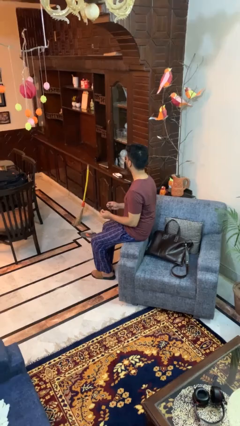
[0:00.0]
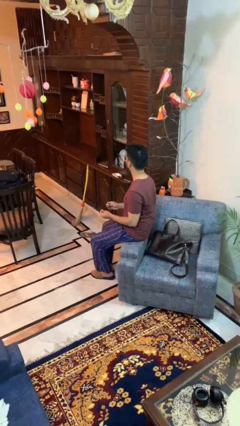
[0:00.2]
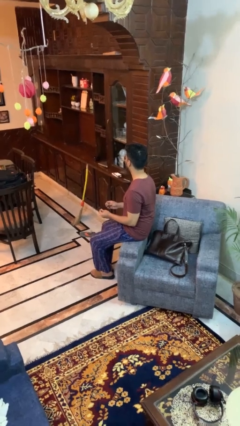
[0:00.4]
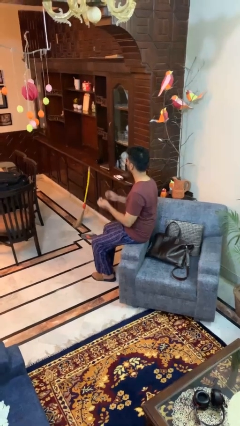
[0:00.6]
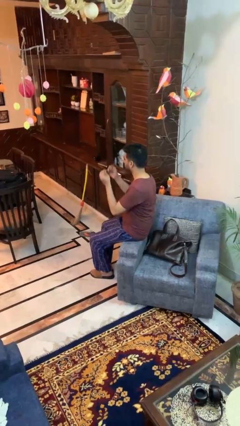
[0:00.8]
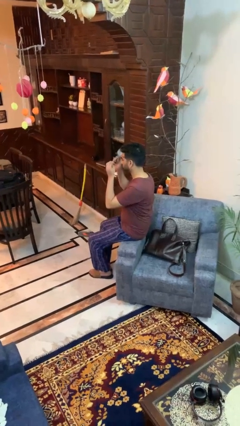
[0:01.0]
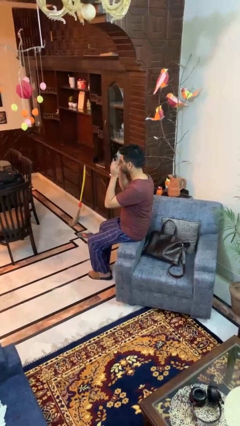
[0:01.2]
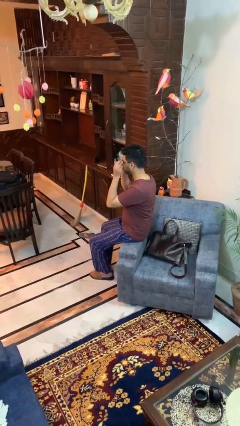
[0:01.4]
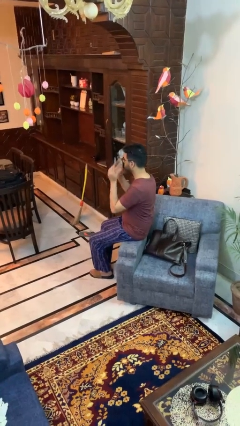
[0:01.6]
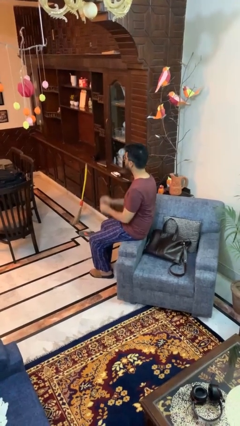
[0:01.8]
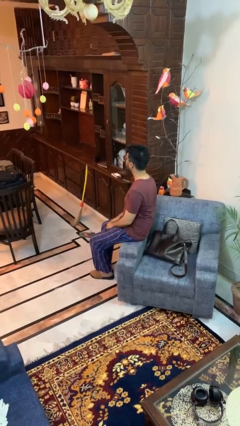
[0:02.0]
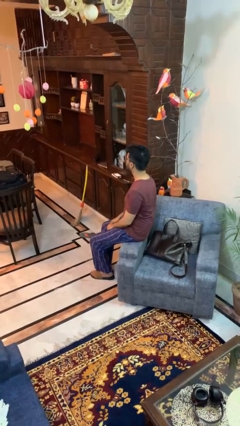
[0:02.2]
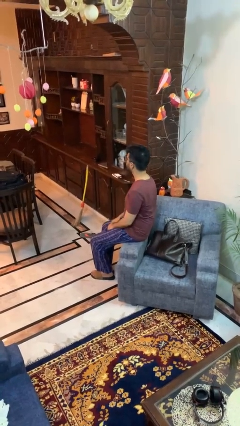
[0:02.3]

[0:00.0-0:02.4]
person puts on glasses

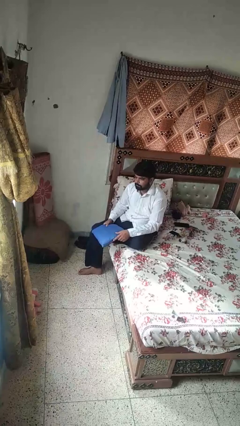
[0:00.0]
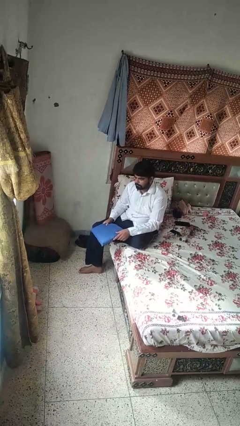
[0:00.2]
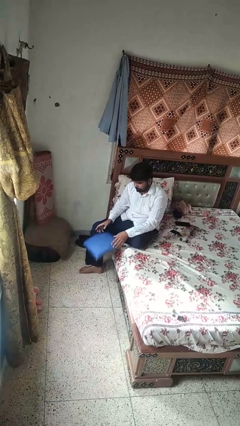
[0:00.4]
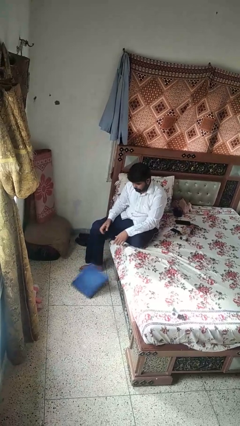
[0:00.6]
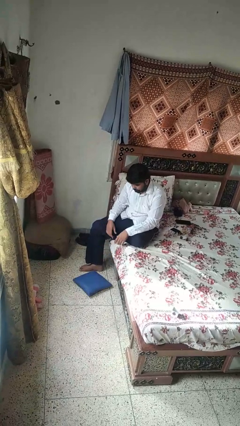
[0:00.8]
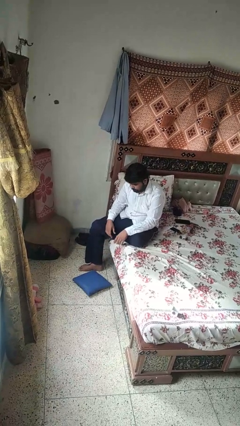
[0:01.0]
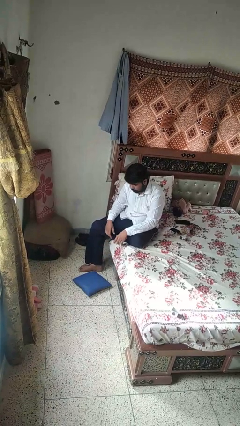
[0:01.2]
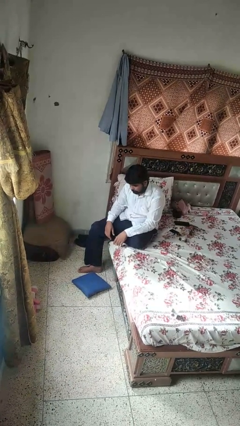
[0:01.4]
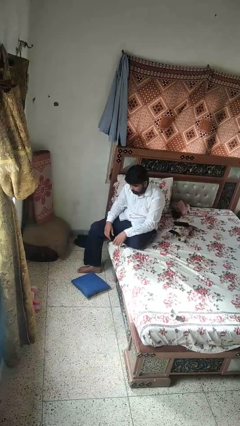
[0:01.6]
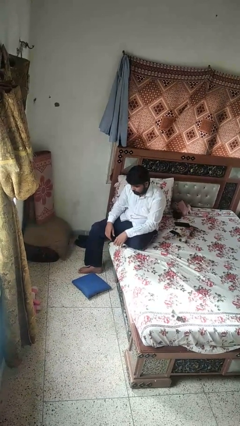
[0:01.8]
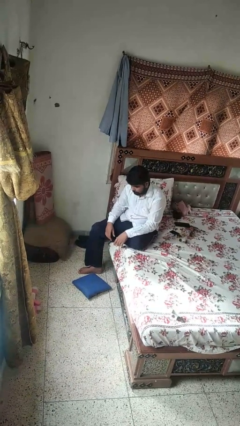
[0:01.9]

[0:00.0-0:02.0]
person drops object

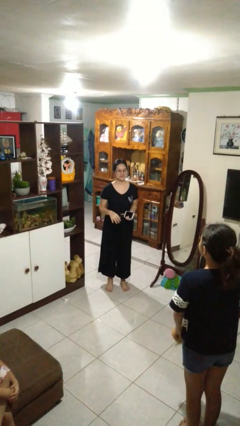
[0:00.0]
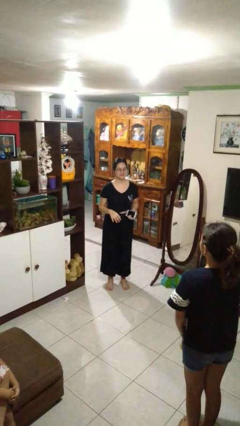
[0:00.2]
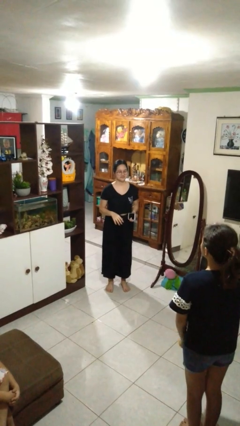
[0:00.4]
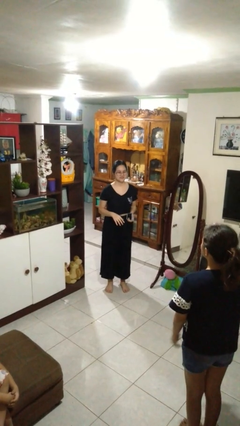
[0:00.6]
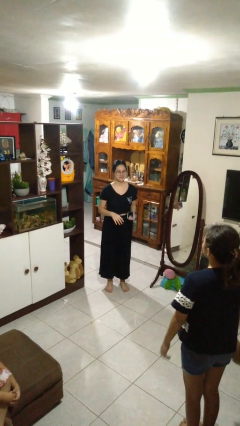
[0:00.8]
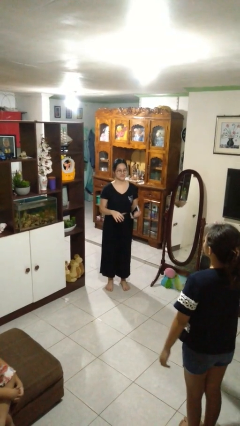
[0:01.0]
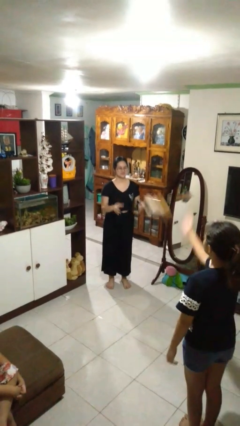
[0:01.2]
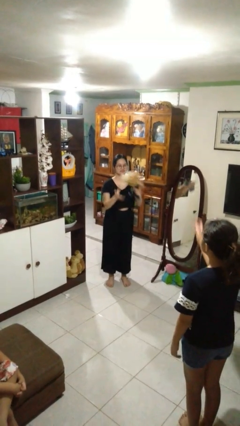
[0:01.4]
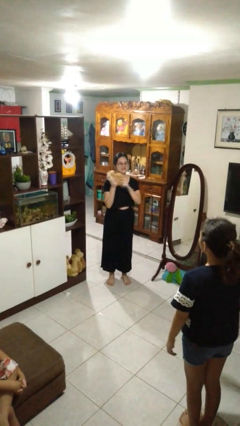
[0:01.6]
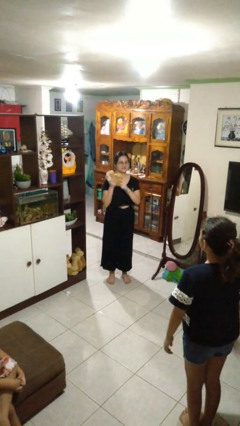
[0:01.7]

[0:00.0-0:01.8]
person catches object from person

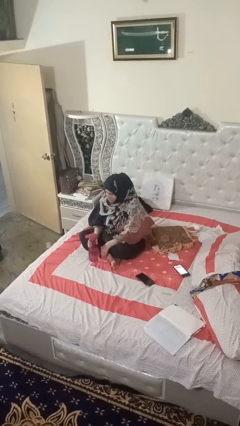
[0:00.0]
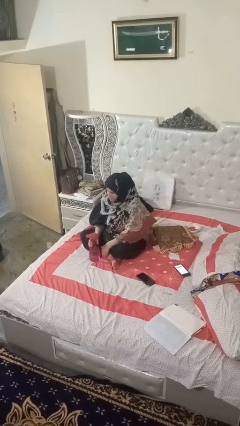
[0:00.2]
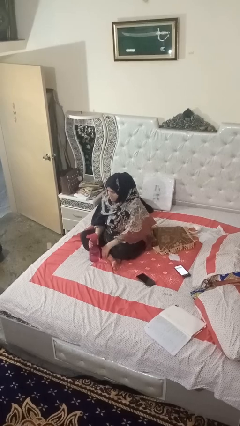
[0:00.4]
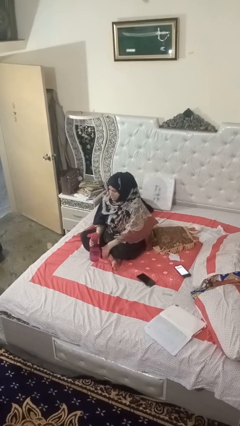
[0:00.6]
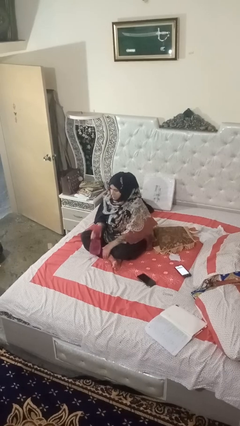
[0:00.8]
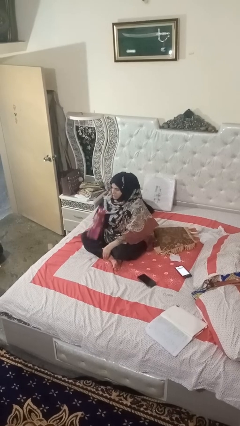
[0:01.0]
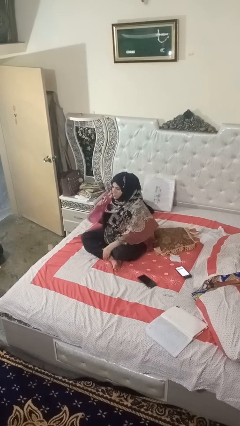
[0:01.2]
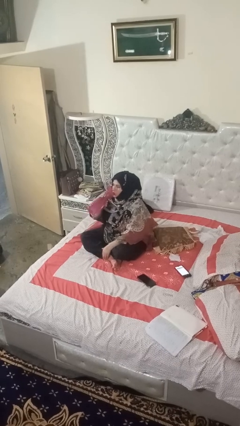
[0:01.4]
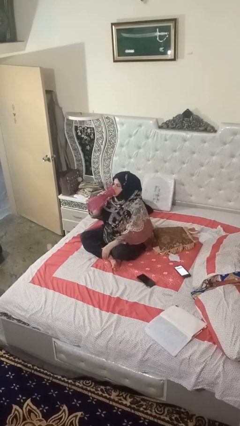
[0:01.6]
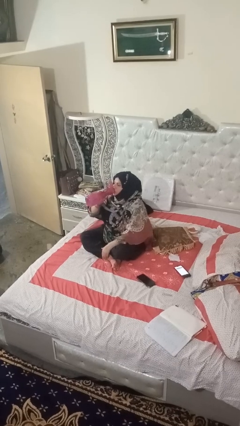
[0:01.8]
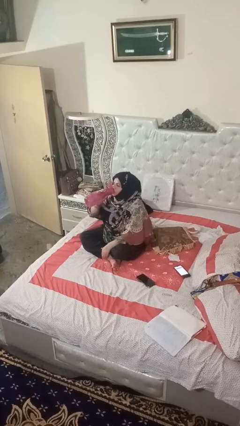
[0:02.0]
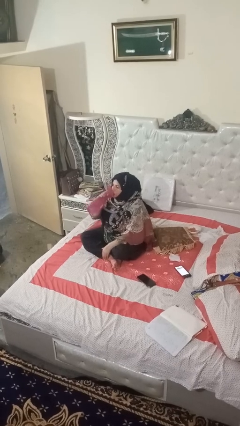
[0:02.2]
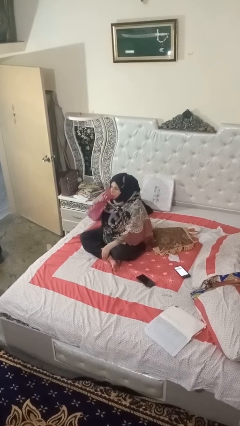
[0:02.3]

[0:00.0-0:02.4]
person drinks from bottle

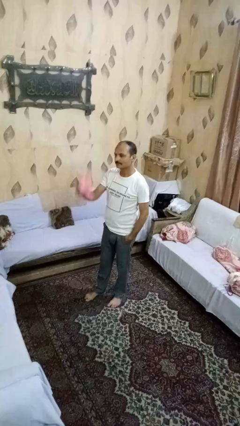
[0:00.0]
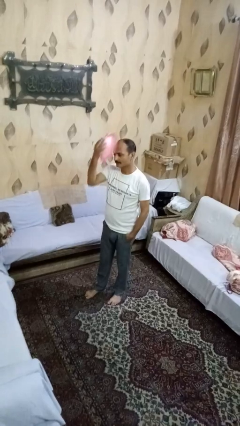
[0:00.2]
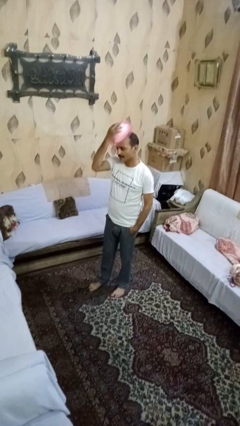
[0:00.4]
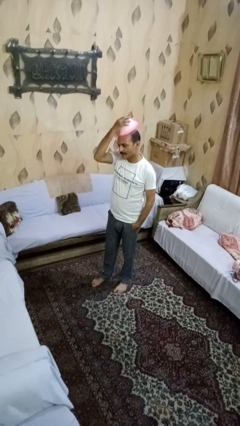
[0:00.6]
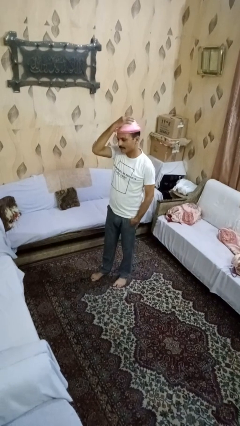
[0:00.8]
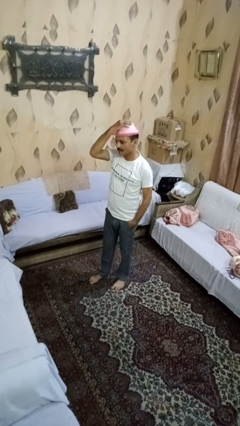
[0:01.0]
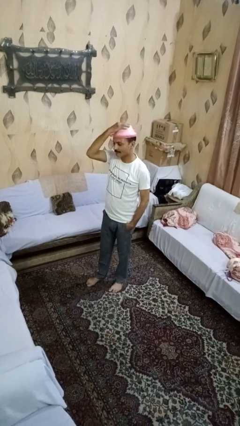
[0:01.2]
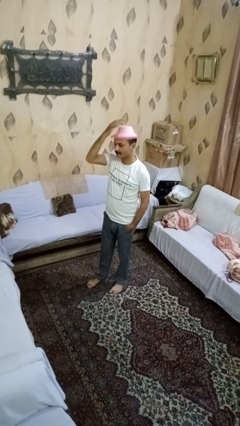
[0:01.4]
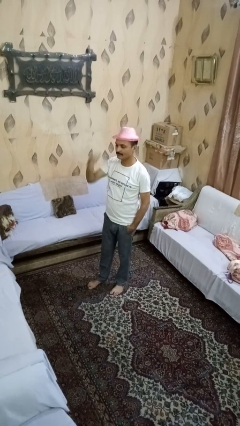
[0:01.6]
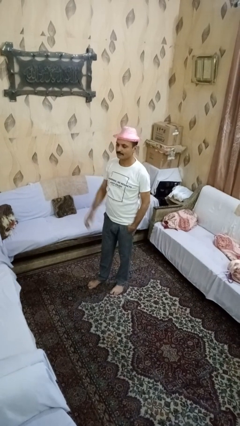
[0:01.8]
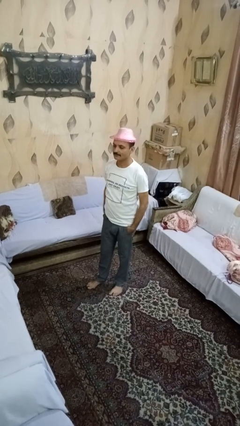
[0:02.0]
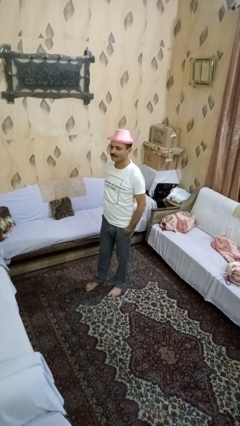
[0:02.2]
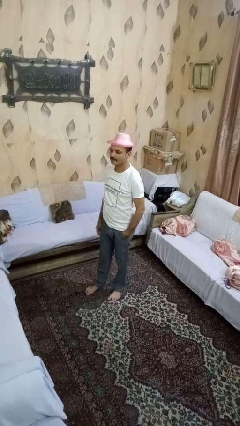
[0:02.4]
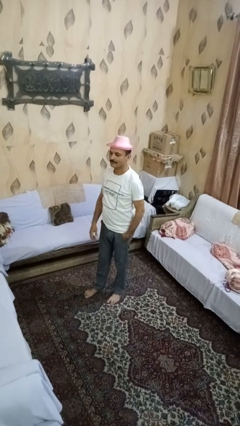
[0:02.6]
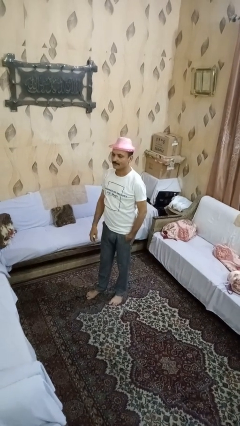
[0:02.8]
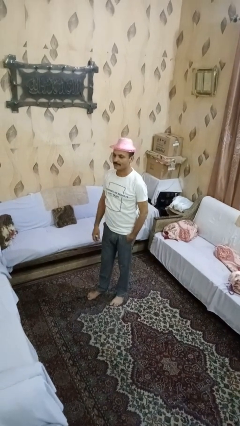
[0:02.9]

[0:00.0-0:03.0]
person puts on hat

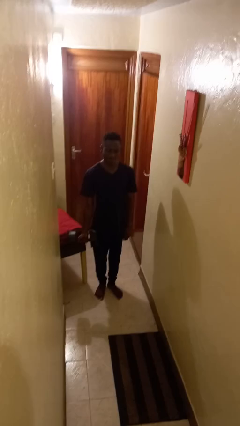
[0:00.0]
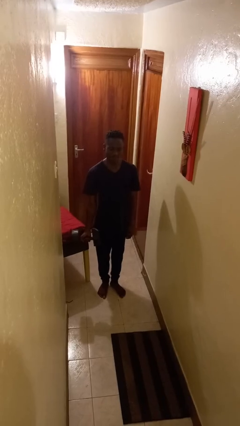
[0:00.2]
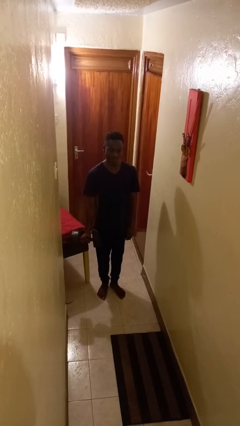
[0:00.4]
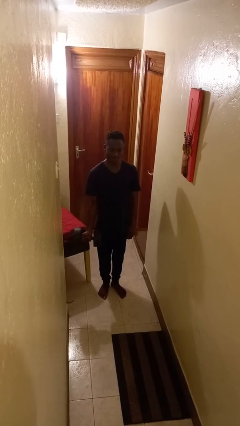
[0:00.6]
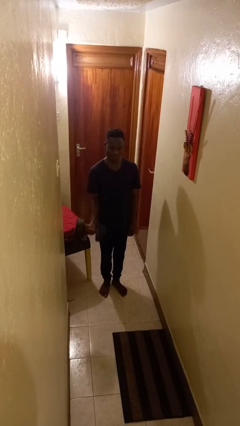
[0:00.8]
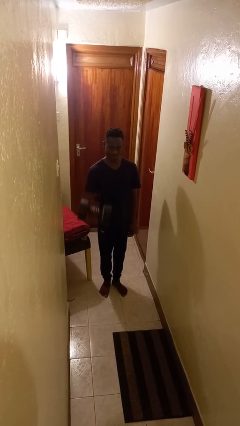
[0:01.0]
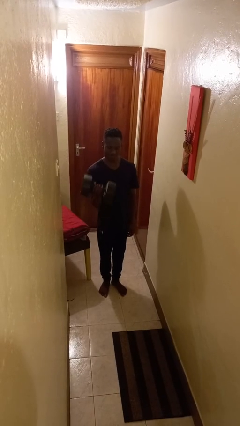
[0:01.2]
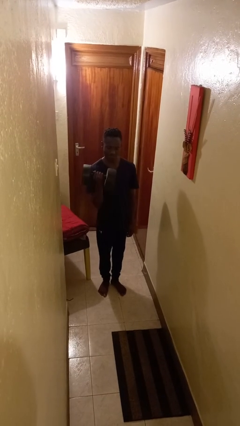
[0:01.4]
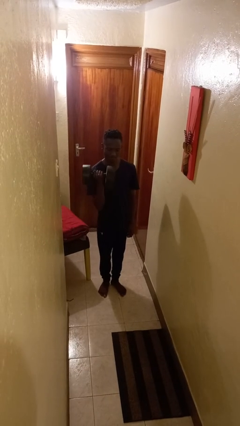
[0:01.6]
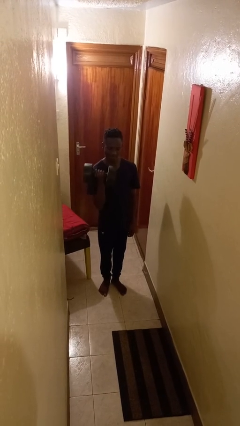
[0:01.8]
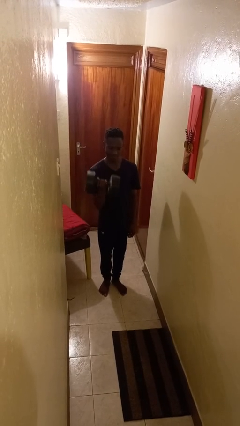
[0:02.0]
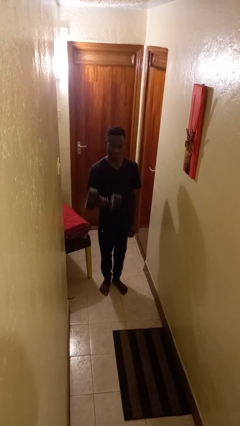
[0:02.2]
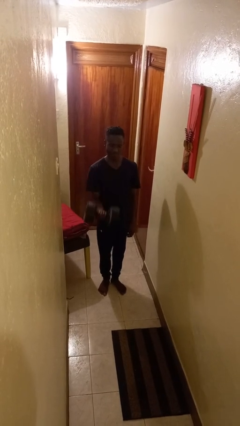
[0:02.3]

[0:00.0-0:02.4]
person lifts dumbbells

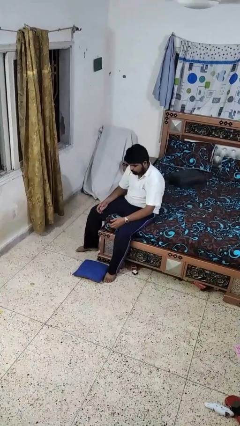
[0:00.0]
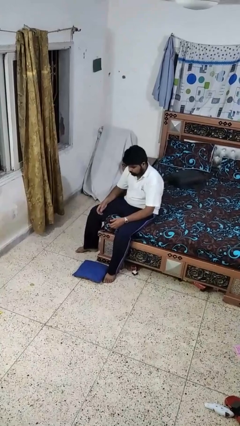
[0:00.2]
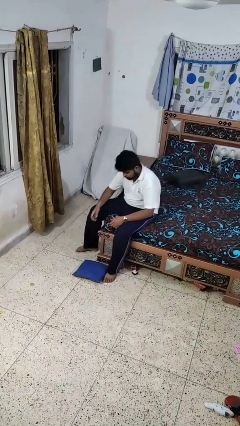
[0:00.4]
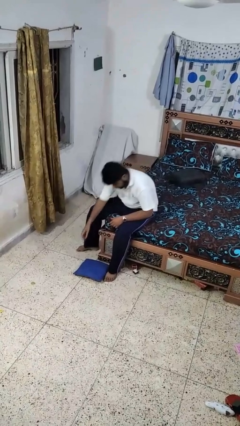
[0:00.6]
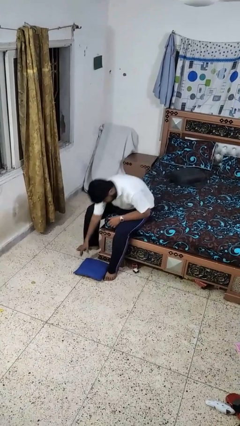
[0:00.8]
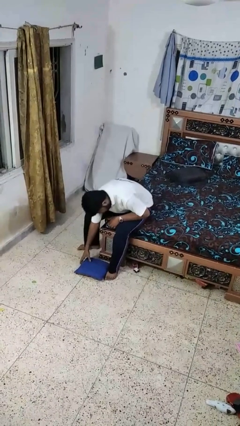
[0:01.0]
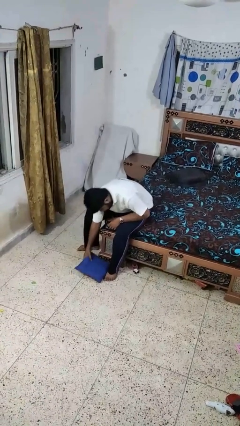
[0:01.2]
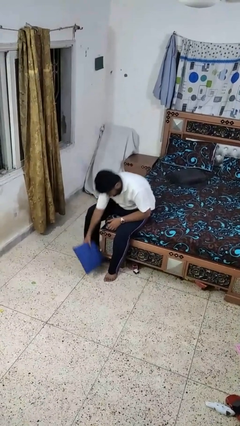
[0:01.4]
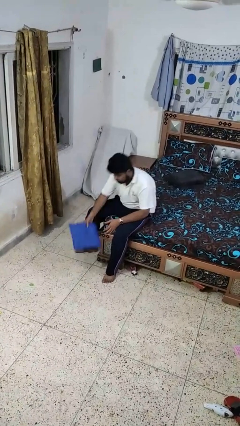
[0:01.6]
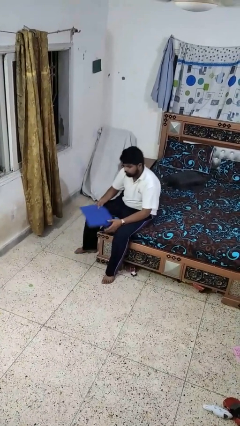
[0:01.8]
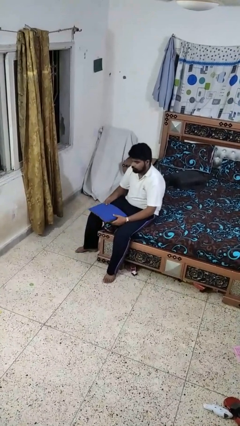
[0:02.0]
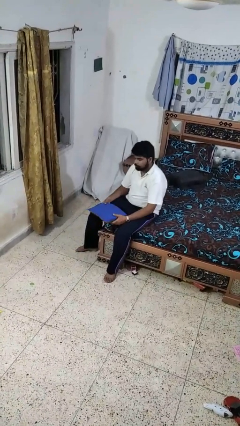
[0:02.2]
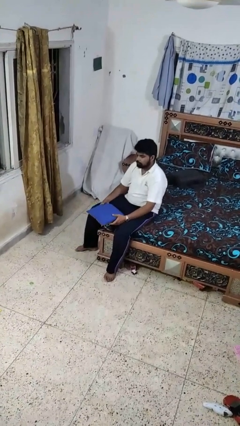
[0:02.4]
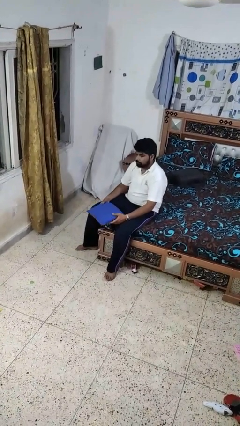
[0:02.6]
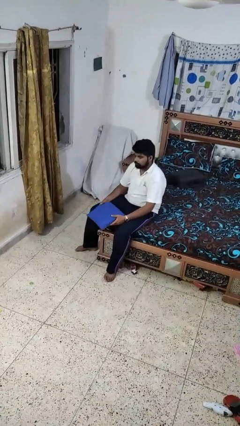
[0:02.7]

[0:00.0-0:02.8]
person picks up object from floor

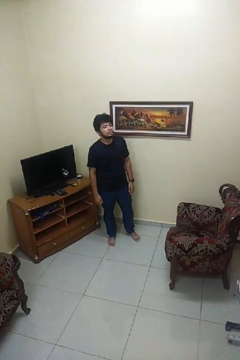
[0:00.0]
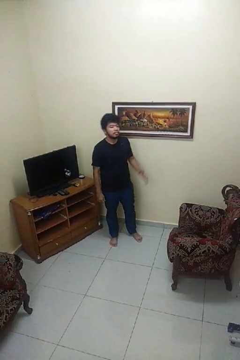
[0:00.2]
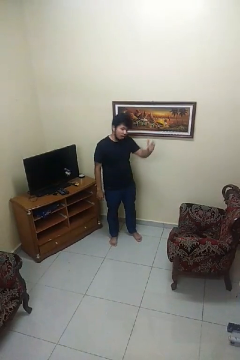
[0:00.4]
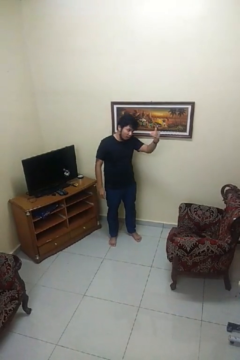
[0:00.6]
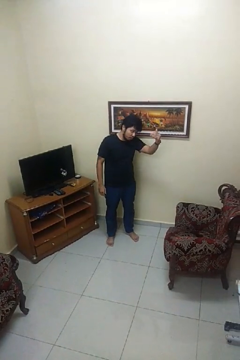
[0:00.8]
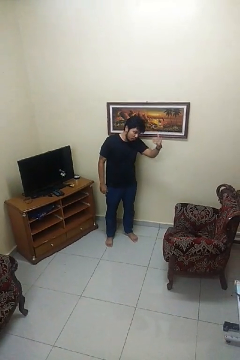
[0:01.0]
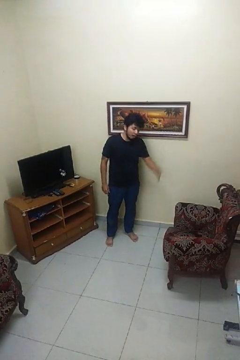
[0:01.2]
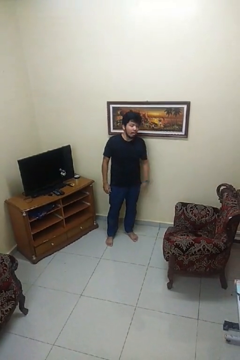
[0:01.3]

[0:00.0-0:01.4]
person gestures come here
